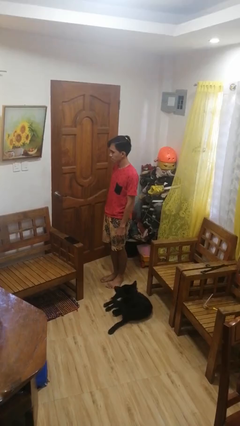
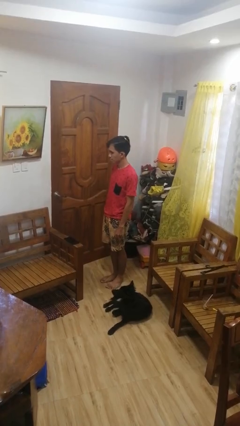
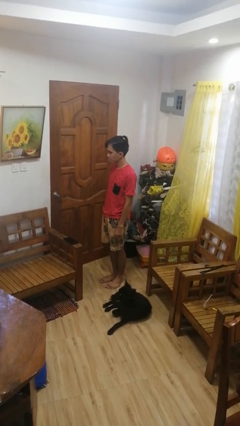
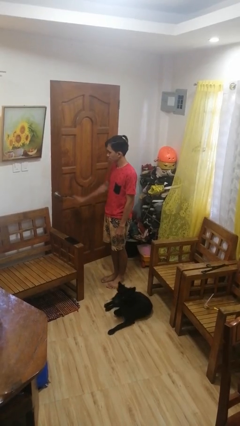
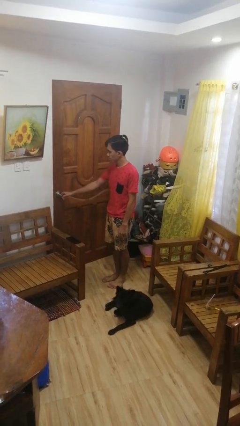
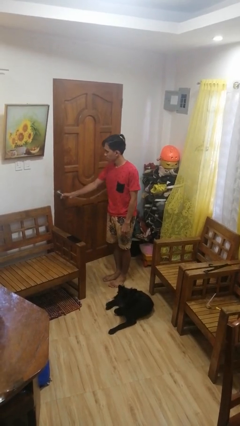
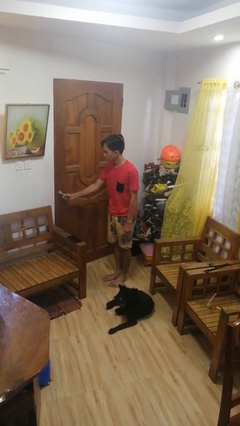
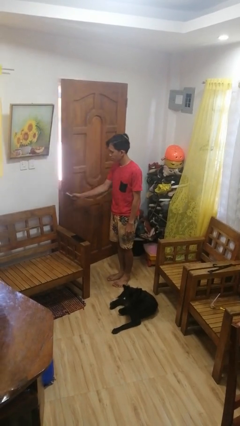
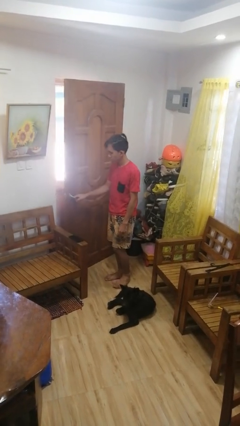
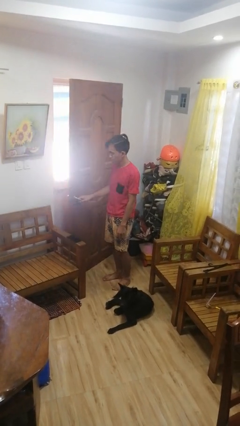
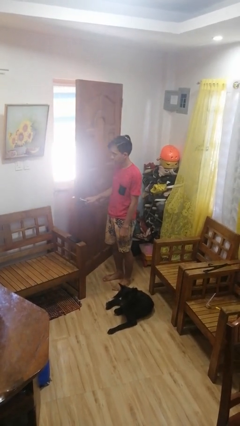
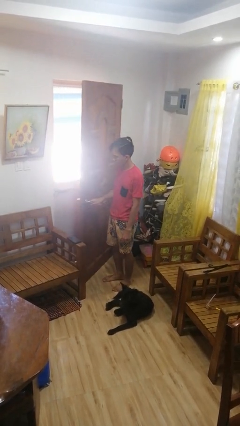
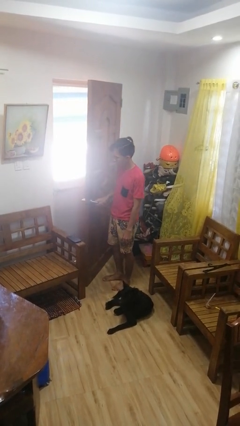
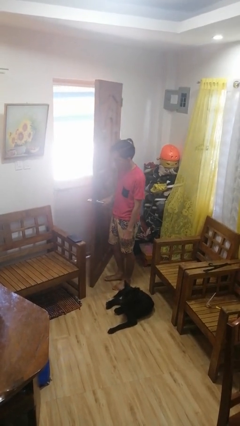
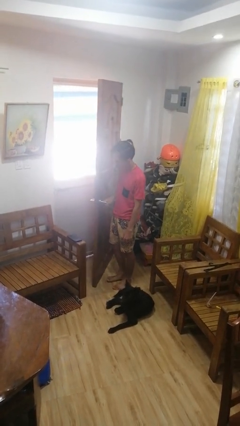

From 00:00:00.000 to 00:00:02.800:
person opens facility door

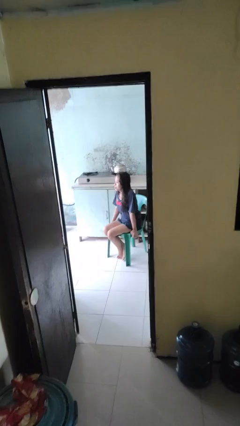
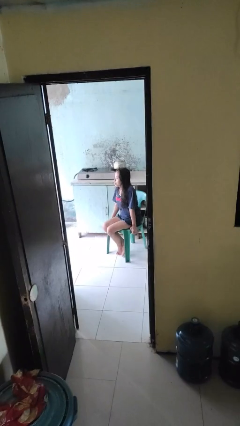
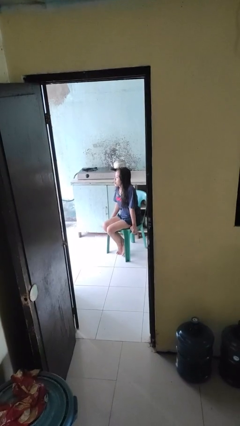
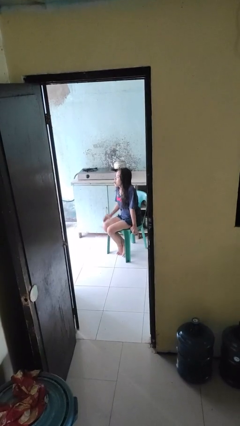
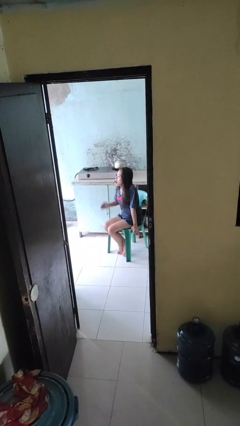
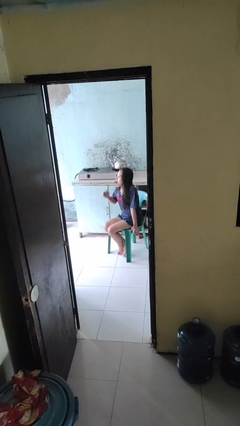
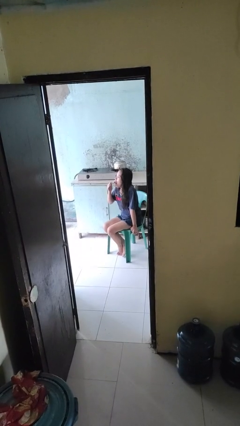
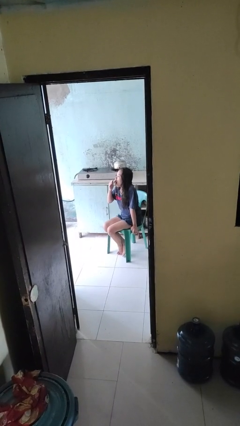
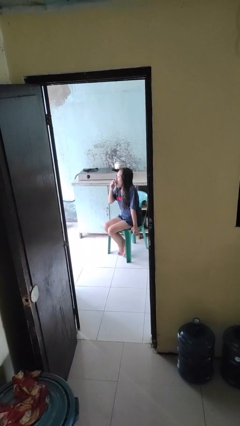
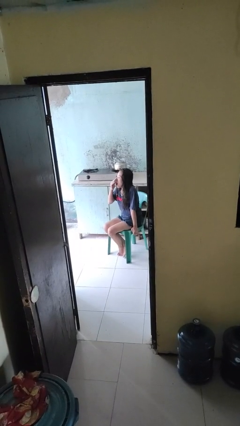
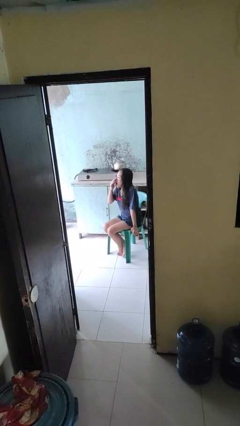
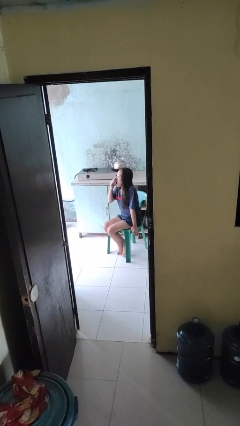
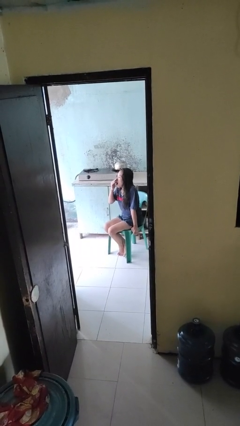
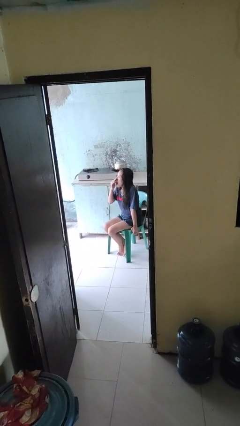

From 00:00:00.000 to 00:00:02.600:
person yawns

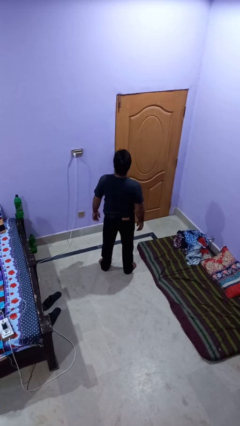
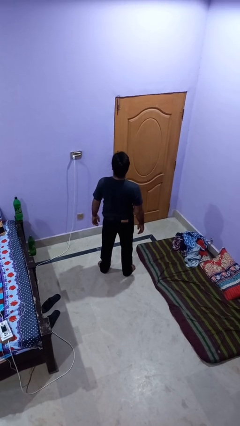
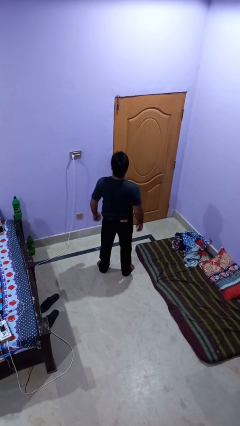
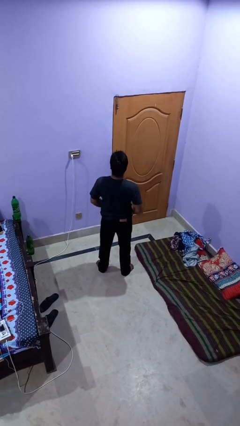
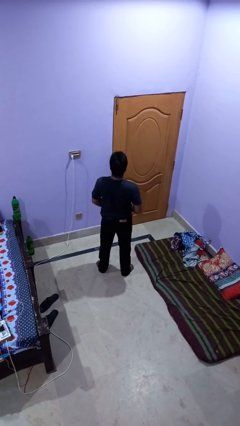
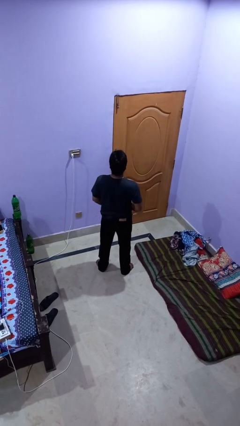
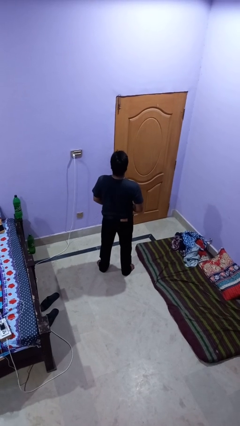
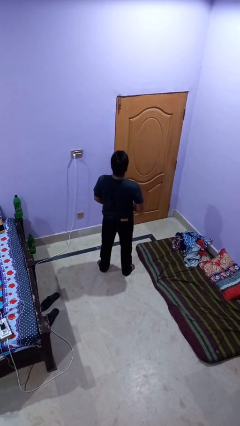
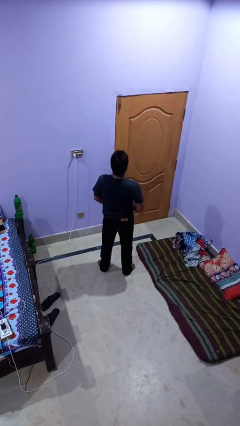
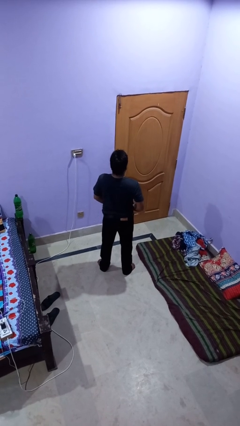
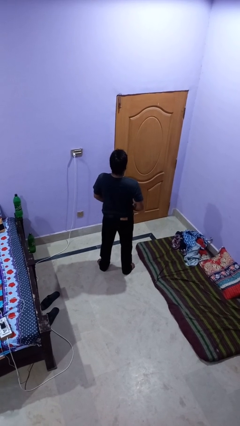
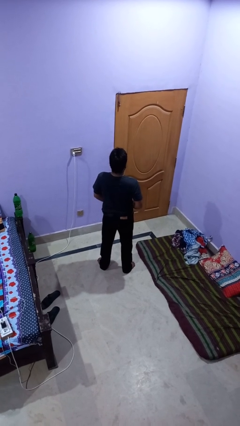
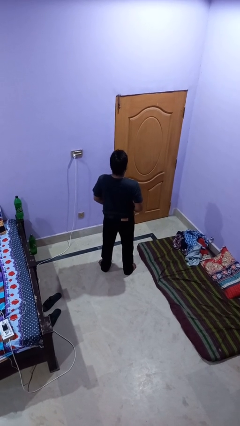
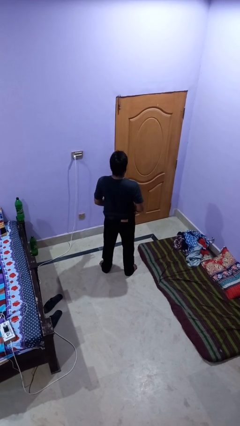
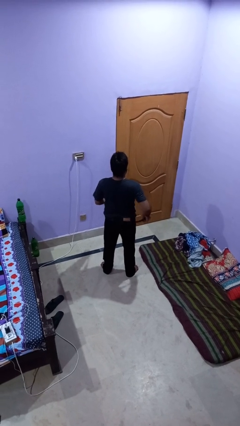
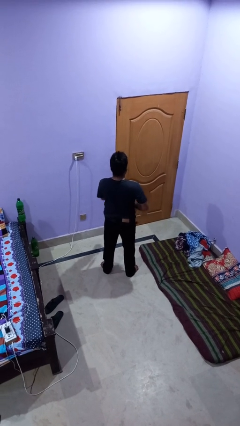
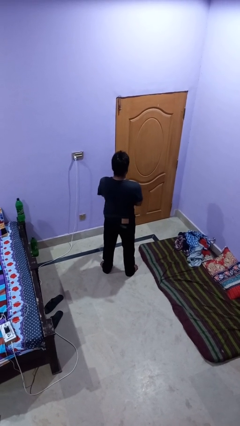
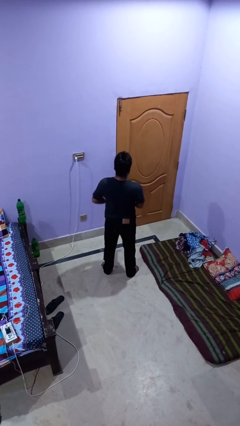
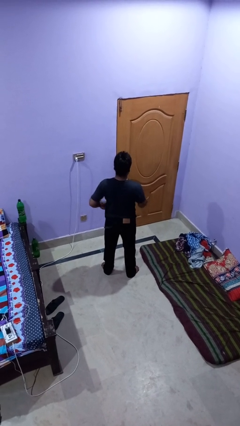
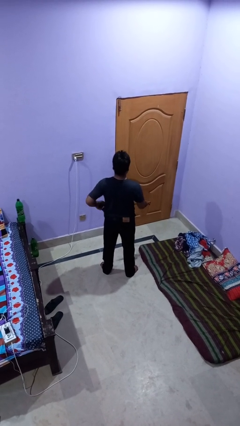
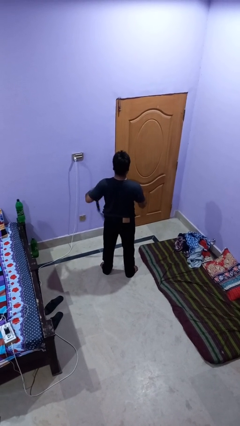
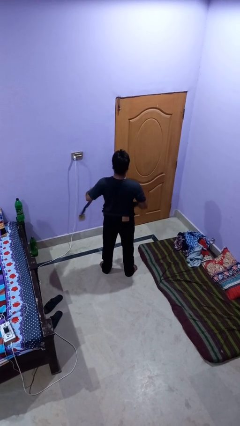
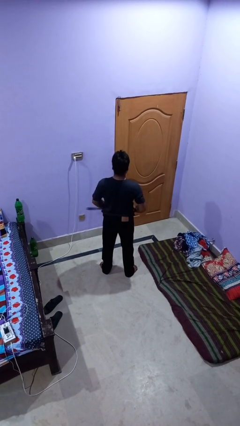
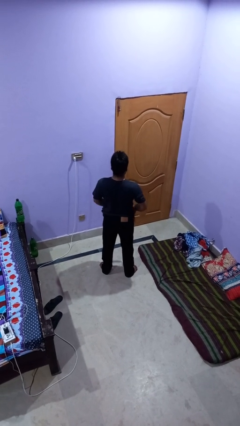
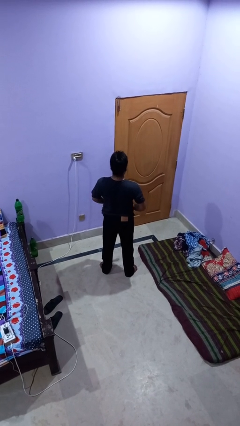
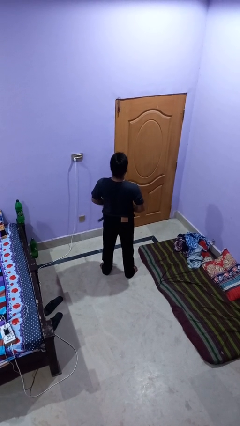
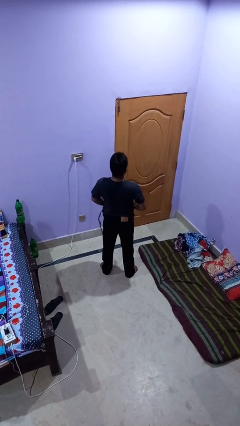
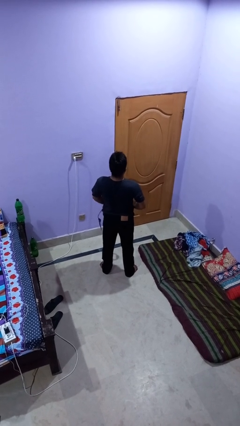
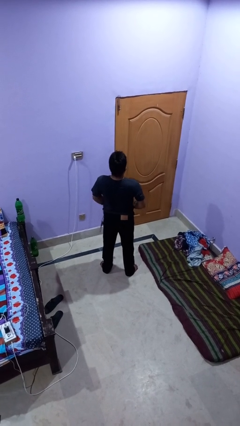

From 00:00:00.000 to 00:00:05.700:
person takes off belt

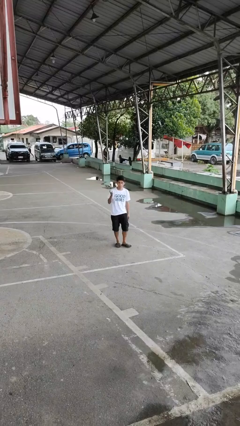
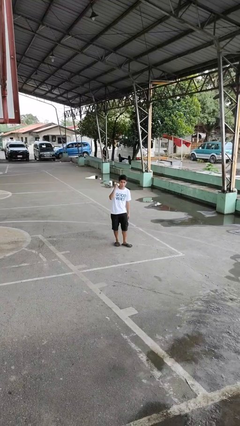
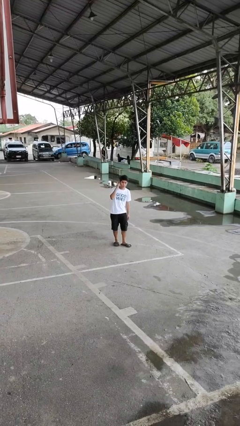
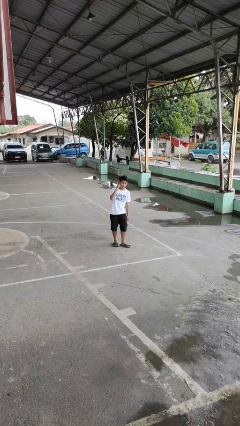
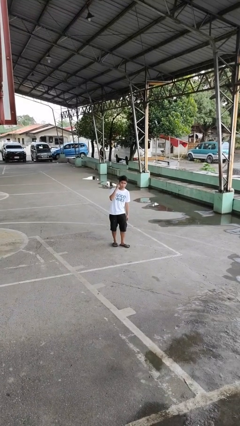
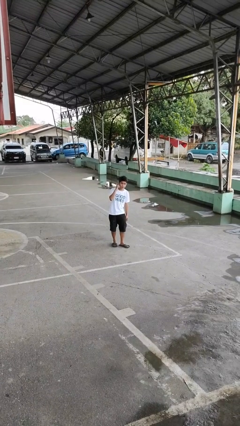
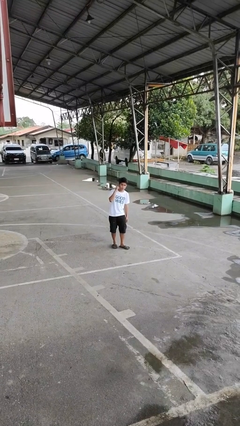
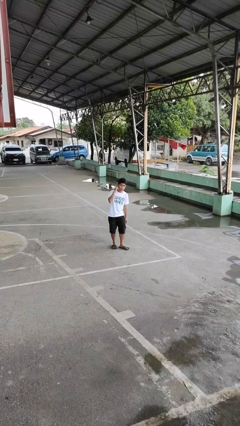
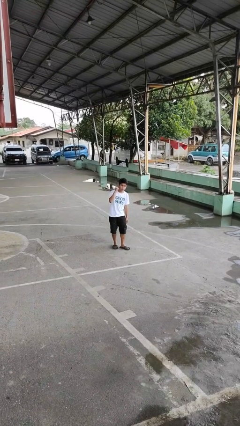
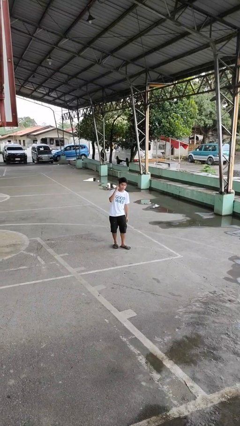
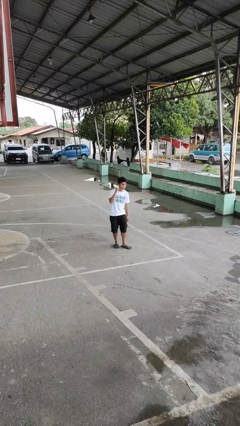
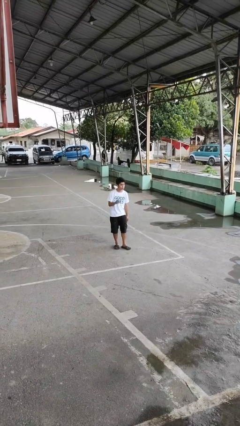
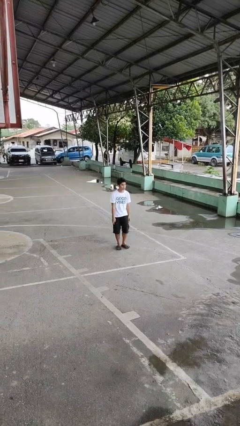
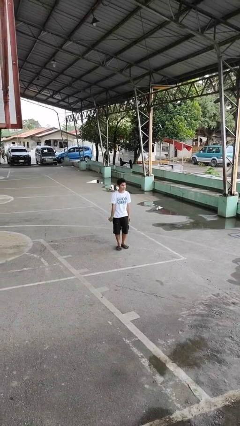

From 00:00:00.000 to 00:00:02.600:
person gestures listen closely

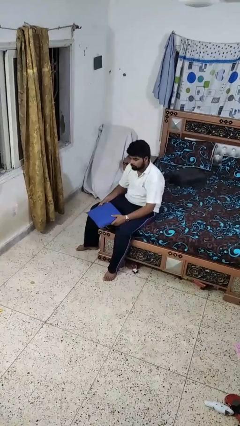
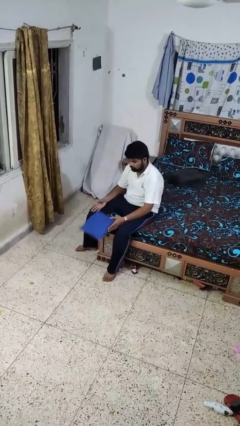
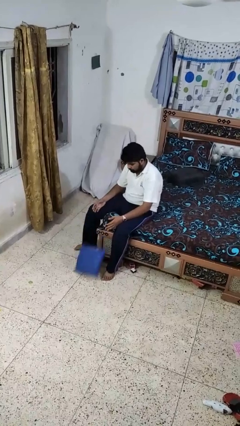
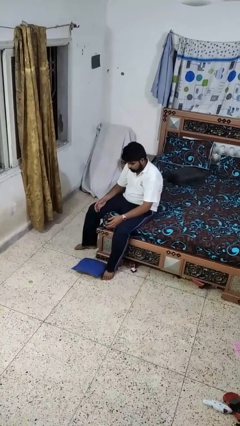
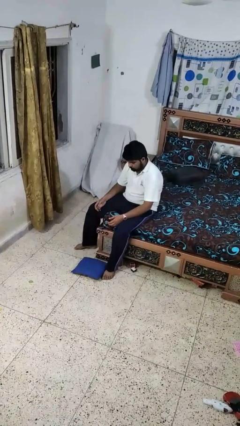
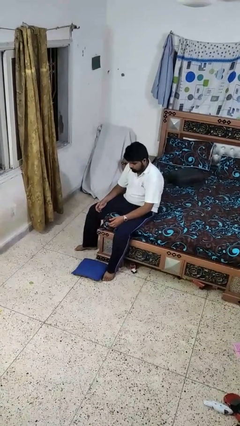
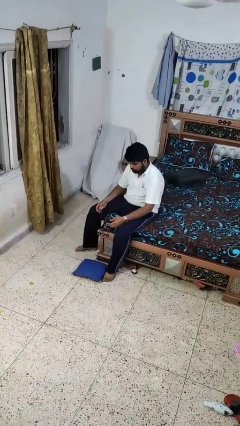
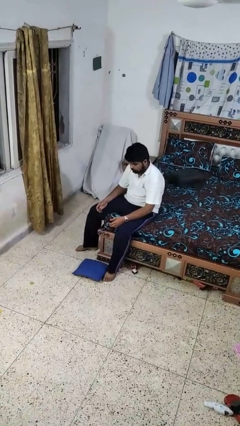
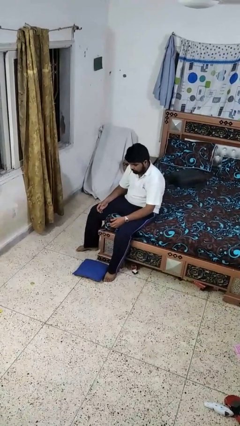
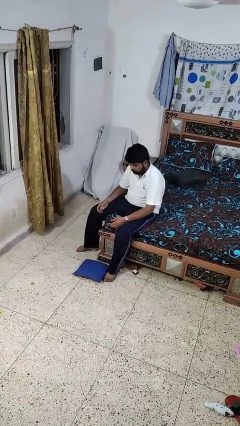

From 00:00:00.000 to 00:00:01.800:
person drops object

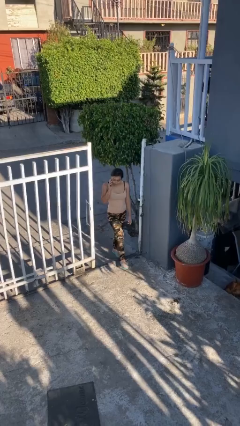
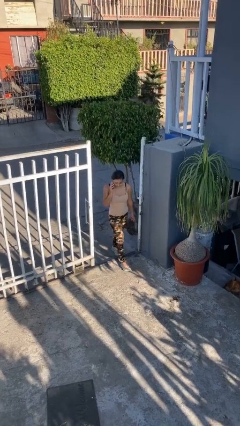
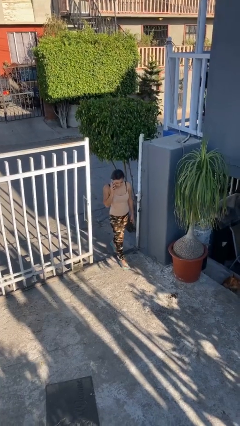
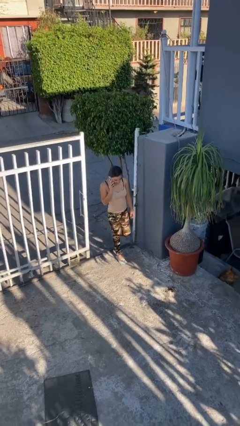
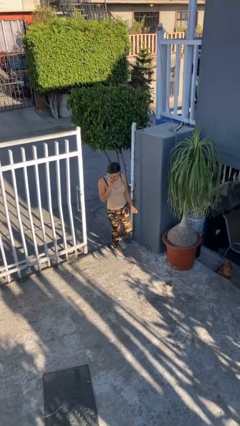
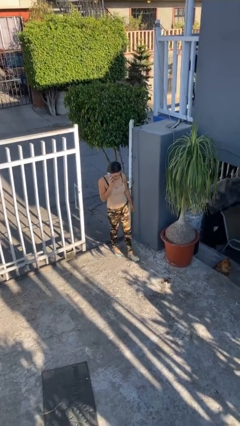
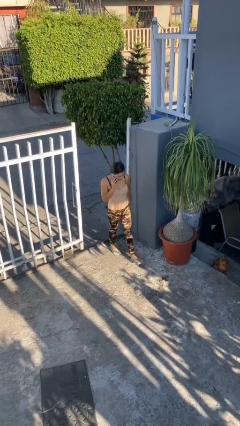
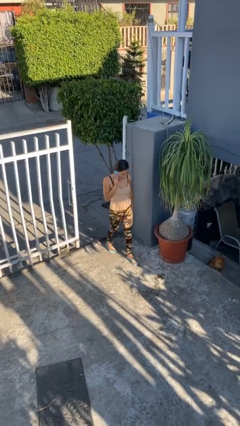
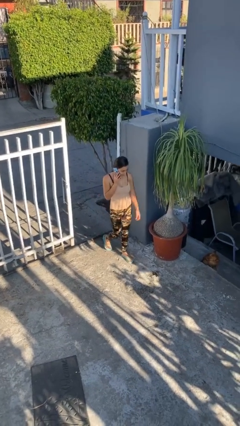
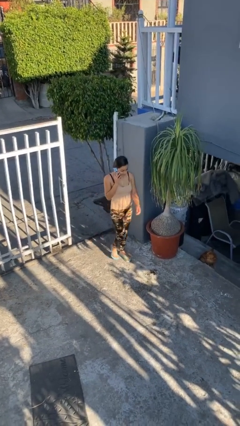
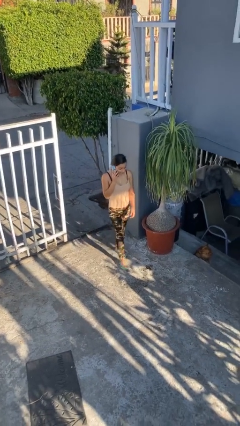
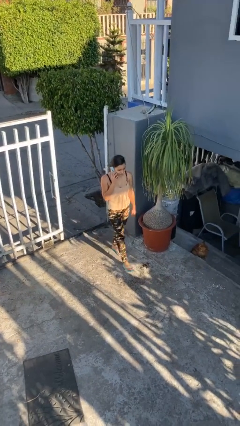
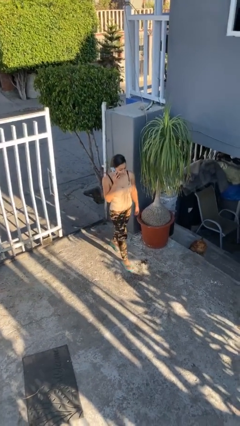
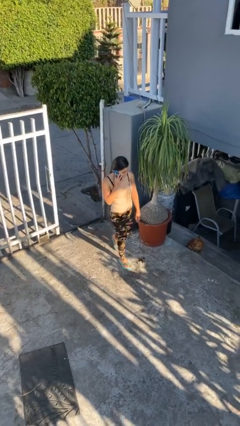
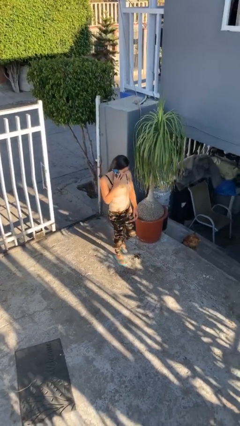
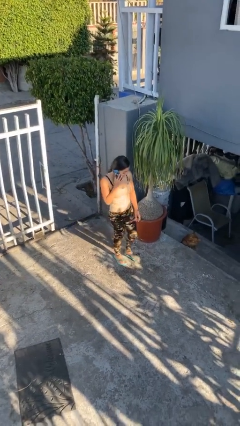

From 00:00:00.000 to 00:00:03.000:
person enters scene through structure
